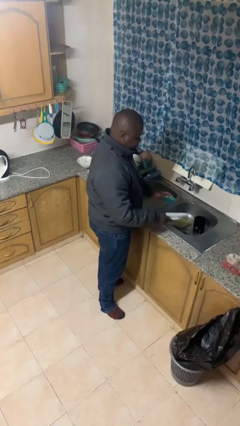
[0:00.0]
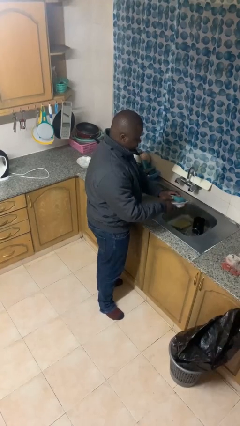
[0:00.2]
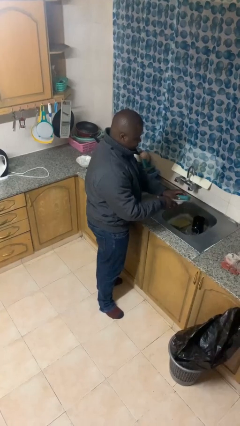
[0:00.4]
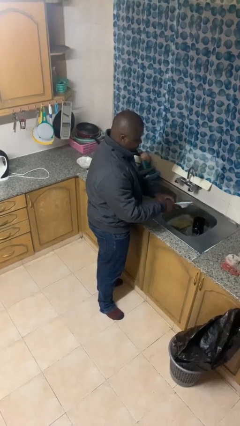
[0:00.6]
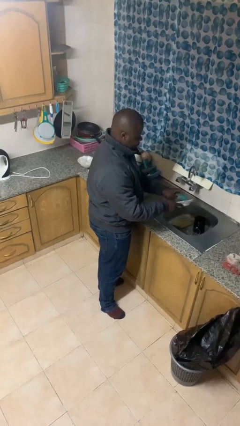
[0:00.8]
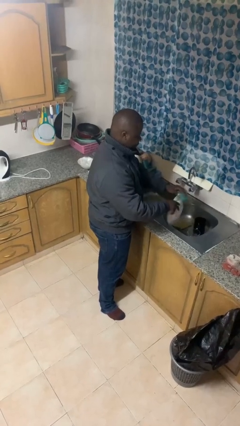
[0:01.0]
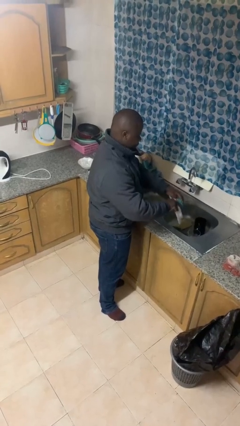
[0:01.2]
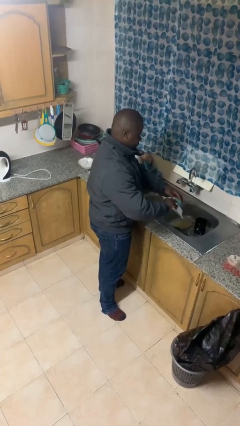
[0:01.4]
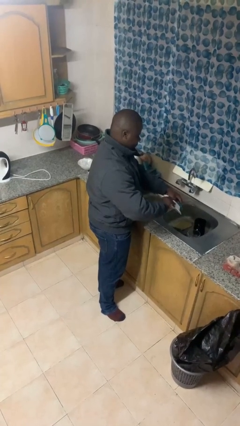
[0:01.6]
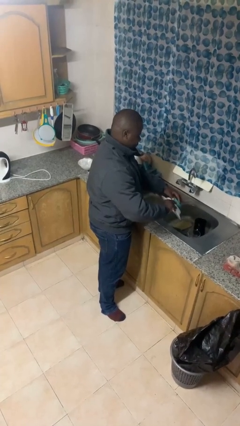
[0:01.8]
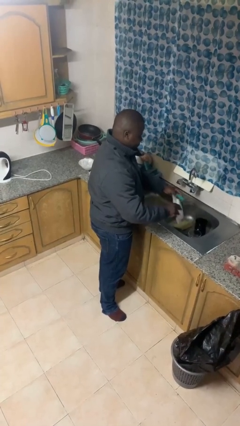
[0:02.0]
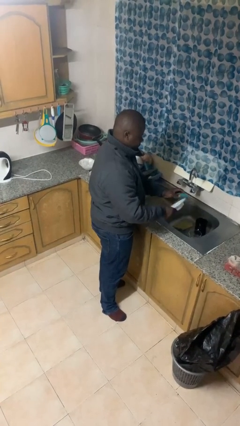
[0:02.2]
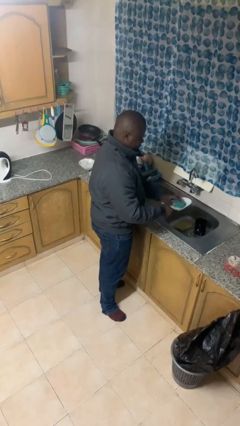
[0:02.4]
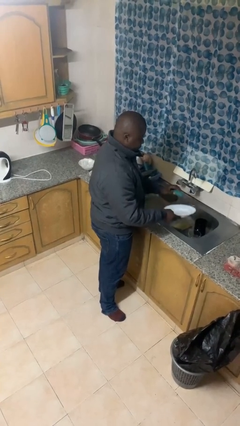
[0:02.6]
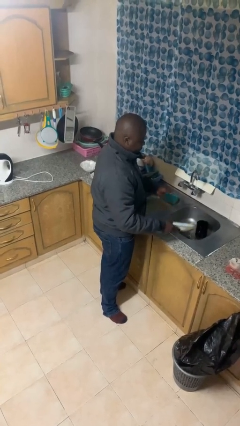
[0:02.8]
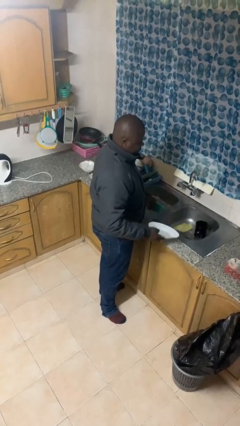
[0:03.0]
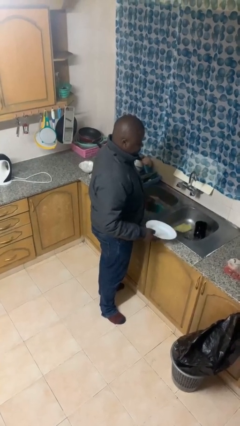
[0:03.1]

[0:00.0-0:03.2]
person washes dish

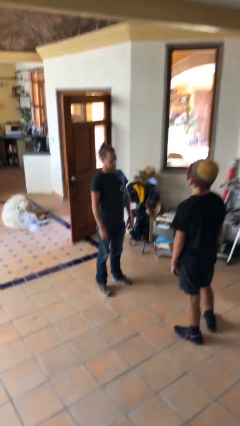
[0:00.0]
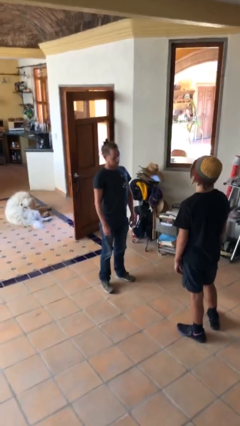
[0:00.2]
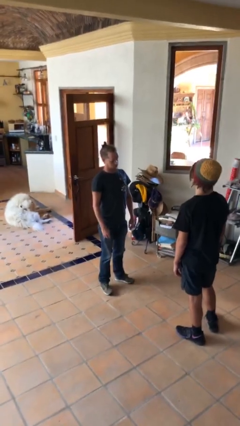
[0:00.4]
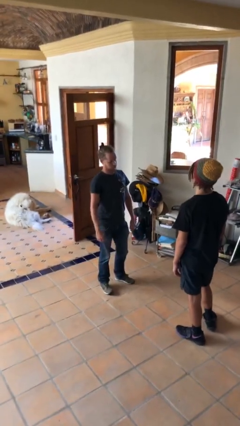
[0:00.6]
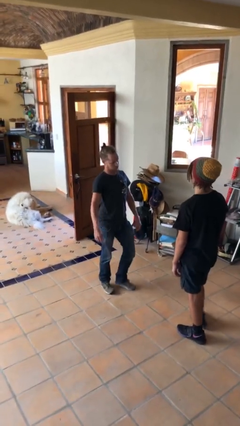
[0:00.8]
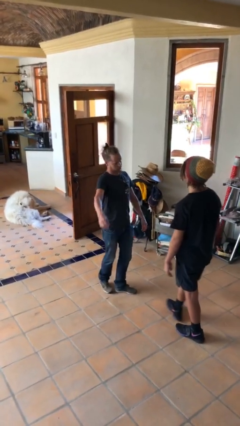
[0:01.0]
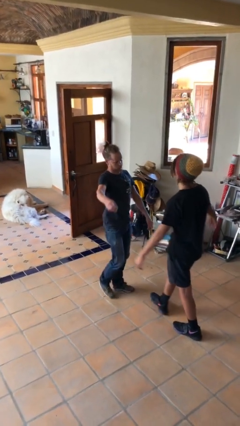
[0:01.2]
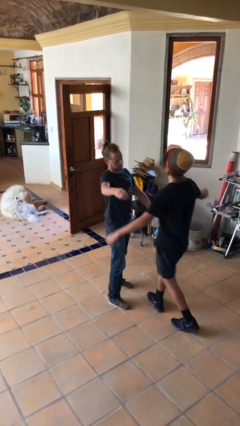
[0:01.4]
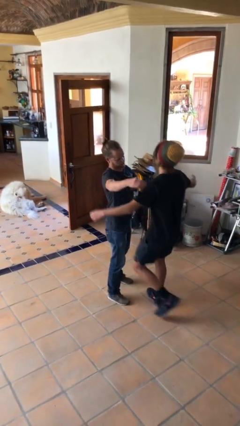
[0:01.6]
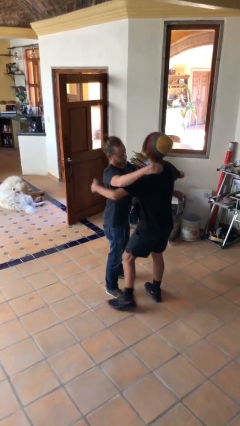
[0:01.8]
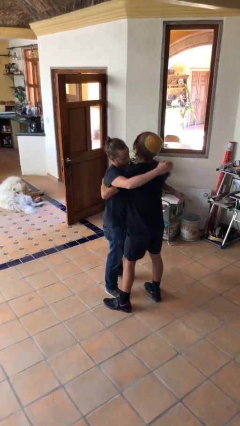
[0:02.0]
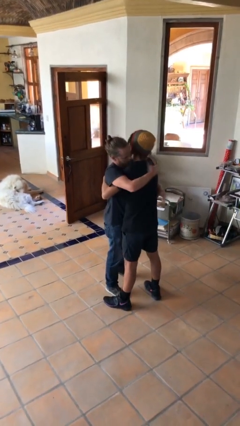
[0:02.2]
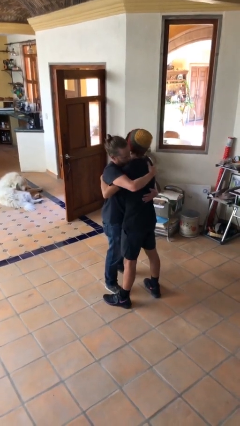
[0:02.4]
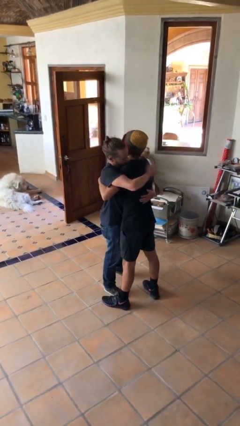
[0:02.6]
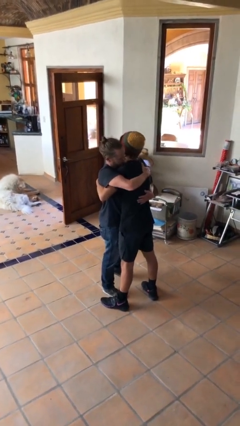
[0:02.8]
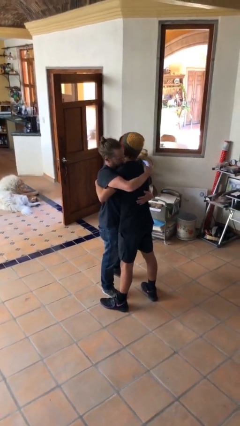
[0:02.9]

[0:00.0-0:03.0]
person embraces person

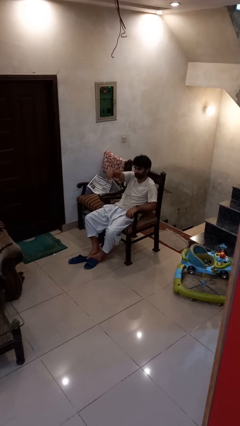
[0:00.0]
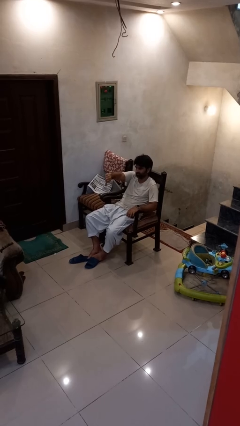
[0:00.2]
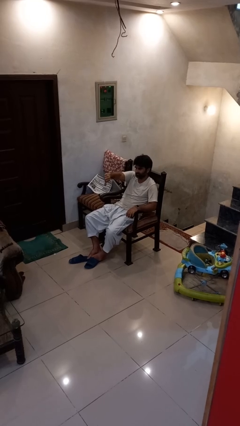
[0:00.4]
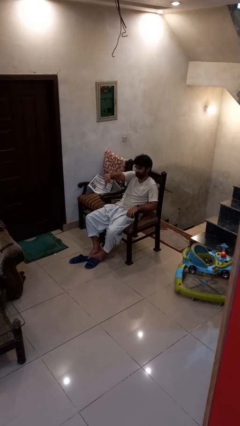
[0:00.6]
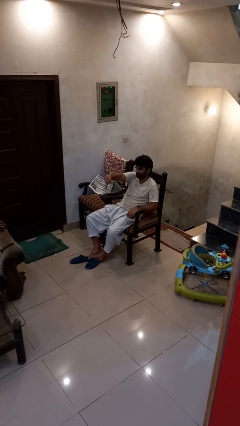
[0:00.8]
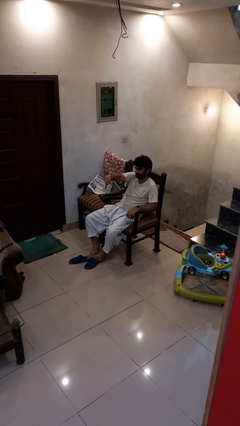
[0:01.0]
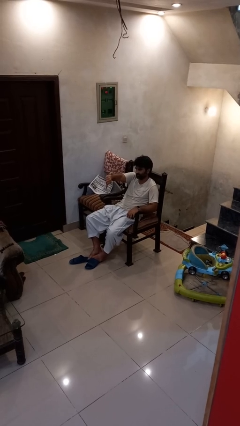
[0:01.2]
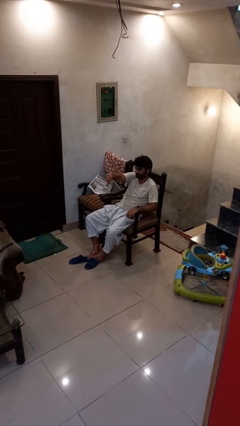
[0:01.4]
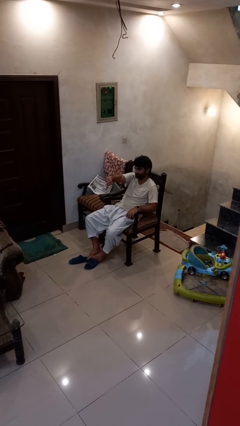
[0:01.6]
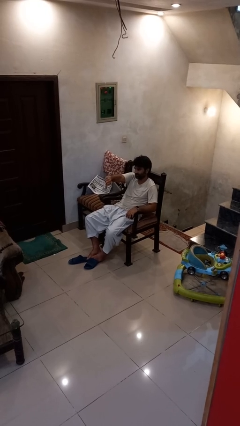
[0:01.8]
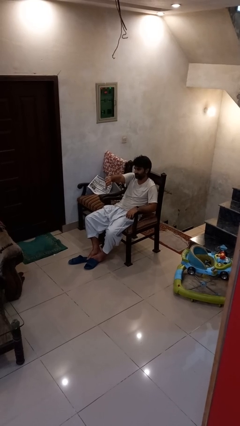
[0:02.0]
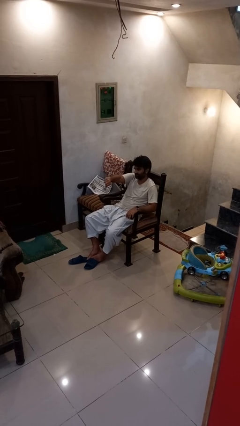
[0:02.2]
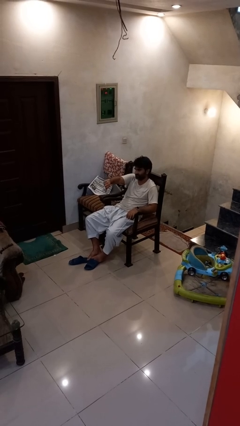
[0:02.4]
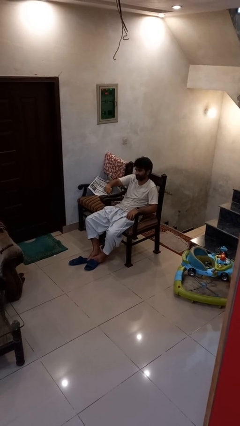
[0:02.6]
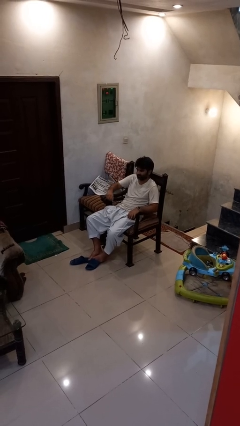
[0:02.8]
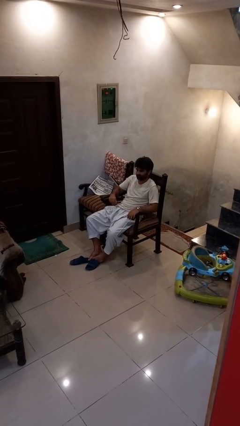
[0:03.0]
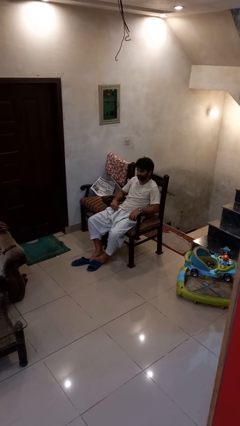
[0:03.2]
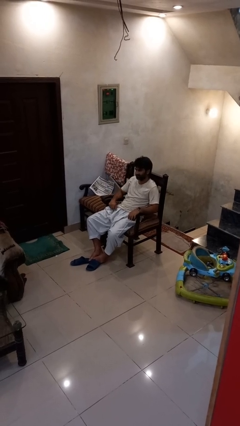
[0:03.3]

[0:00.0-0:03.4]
person gestures thumbs down

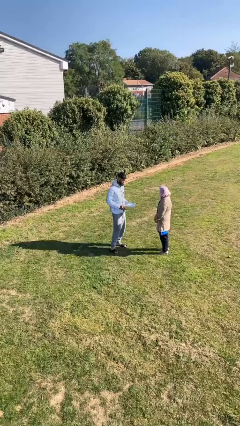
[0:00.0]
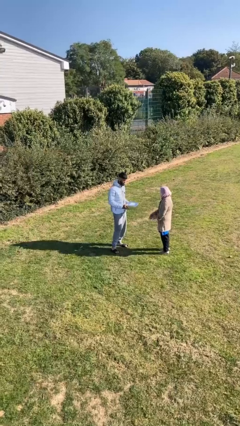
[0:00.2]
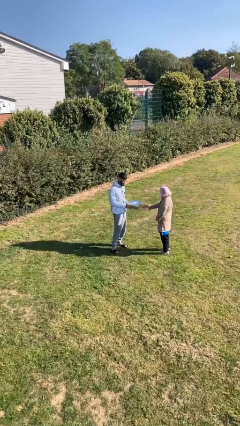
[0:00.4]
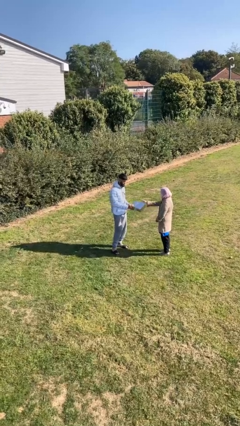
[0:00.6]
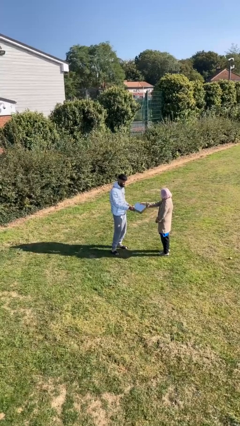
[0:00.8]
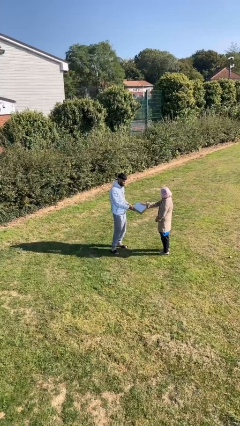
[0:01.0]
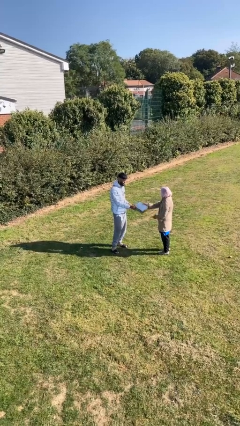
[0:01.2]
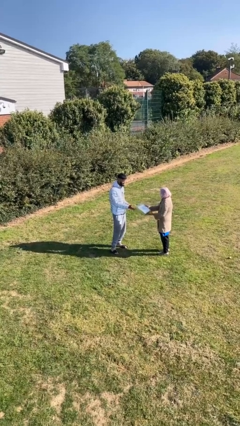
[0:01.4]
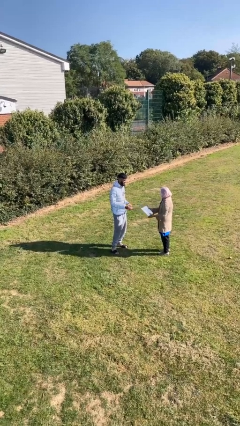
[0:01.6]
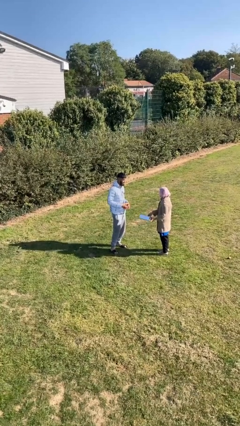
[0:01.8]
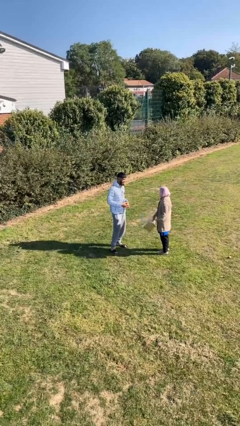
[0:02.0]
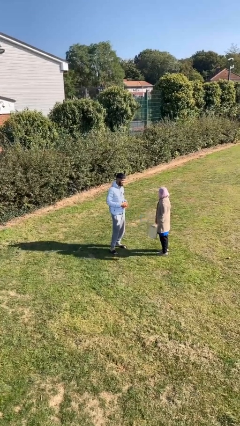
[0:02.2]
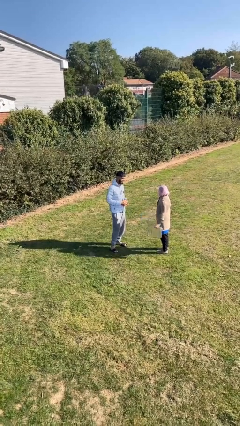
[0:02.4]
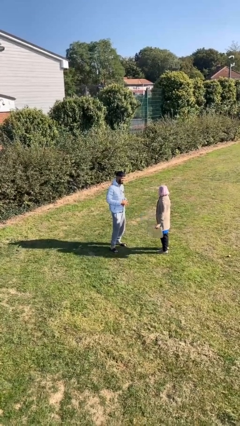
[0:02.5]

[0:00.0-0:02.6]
person transfers object to person

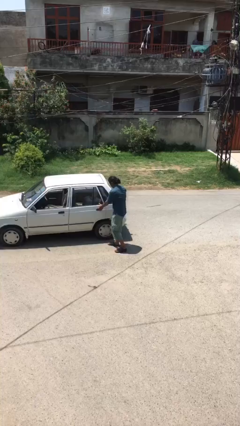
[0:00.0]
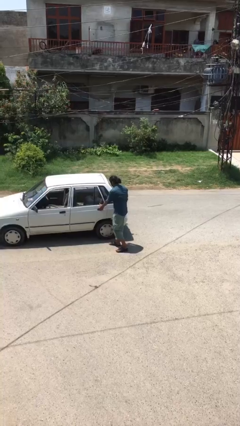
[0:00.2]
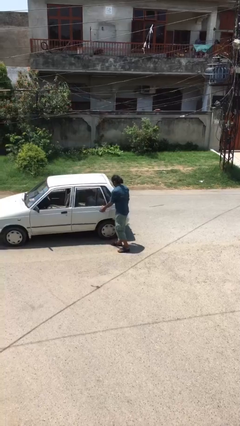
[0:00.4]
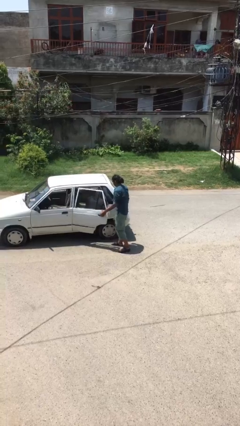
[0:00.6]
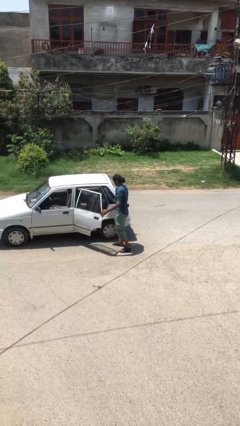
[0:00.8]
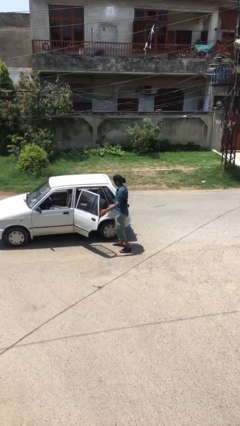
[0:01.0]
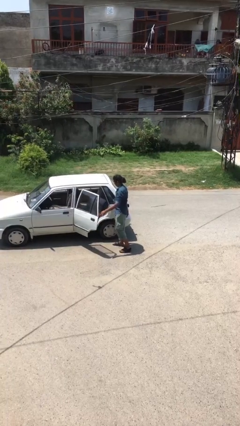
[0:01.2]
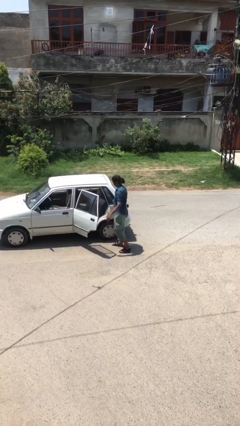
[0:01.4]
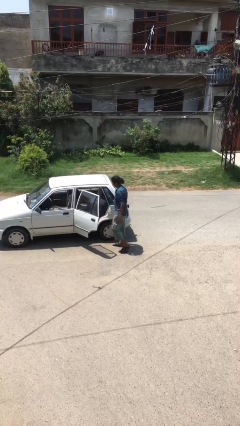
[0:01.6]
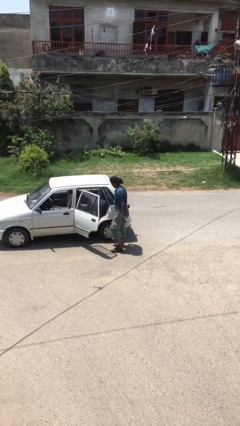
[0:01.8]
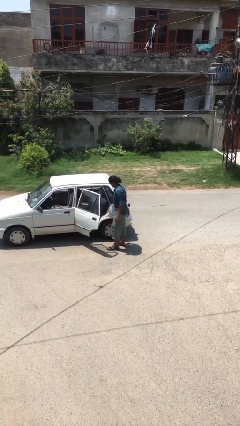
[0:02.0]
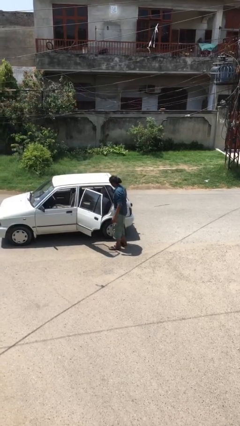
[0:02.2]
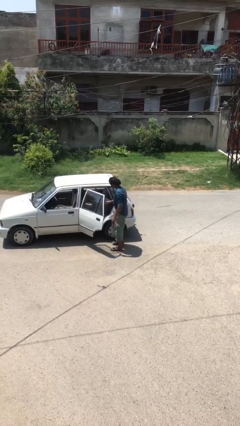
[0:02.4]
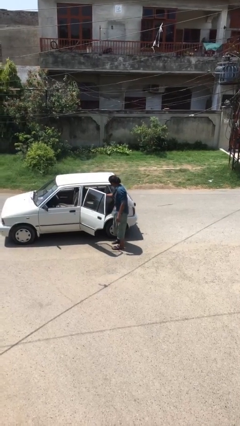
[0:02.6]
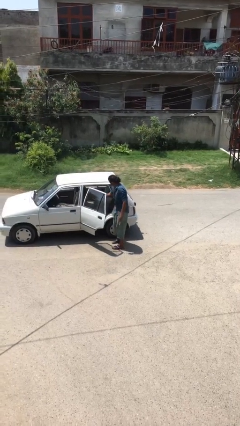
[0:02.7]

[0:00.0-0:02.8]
person opens car door

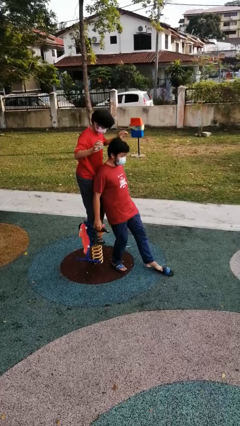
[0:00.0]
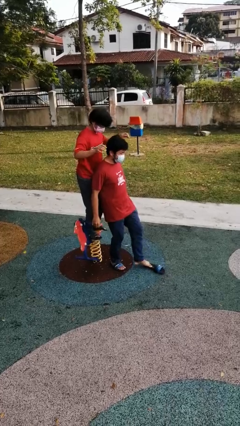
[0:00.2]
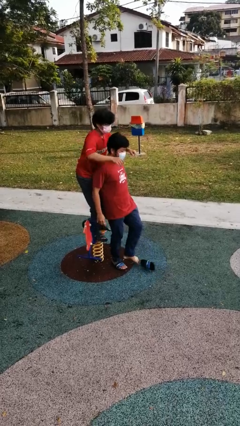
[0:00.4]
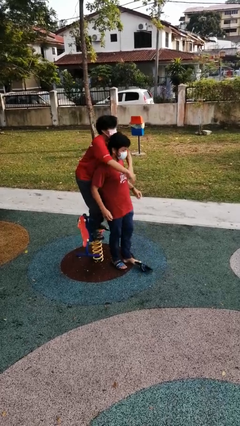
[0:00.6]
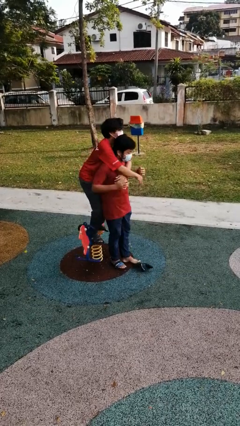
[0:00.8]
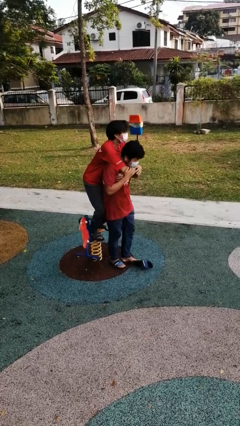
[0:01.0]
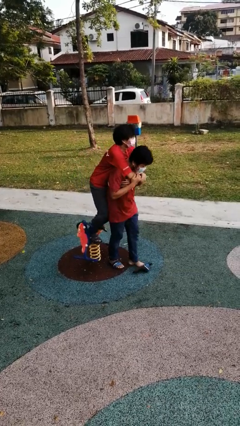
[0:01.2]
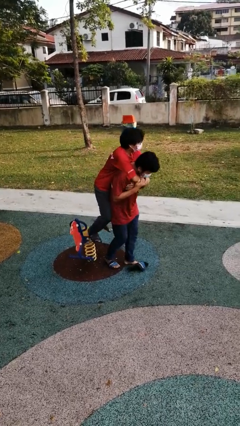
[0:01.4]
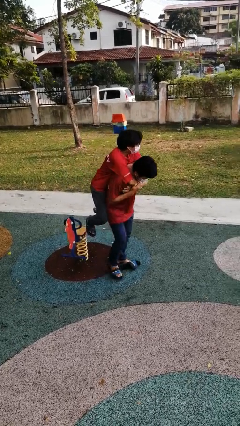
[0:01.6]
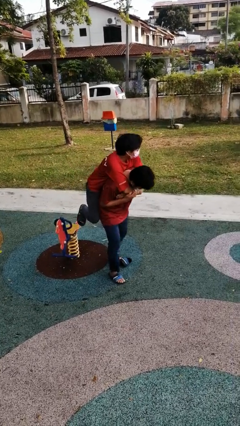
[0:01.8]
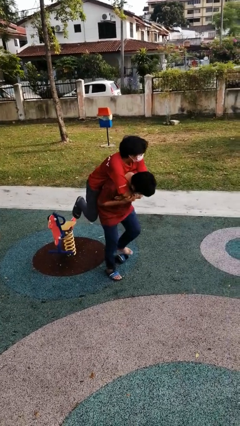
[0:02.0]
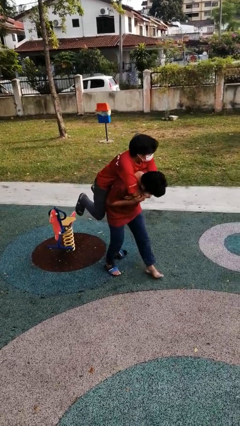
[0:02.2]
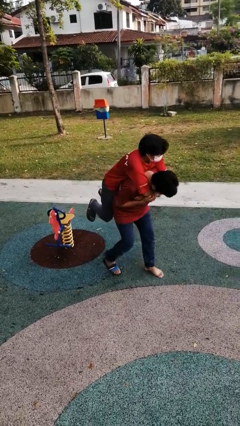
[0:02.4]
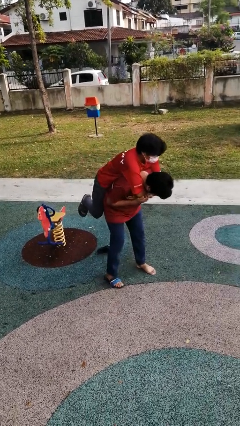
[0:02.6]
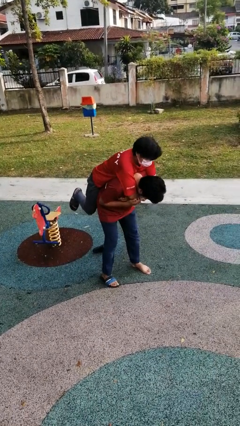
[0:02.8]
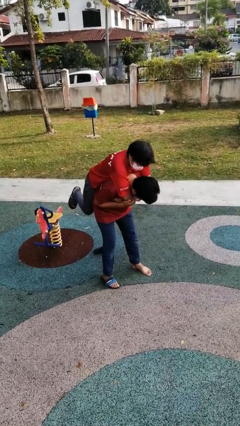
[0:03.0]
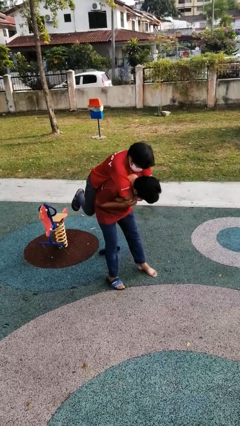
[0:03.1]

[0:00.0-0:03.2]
person carries person over shoulder
